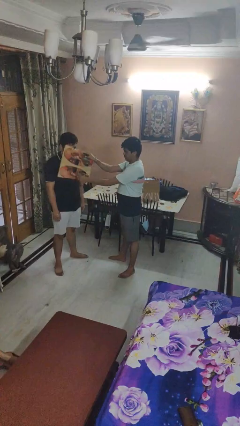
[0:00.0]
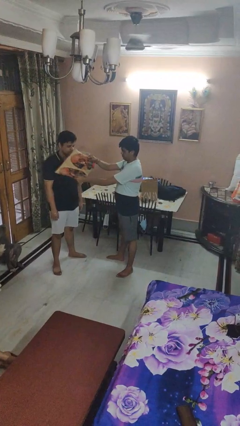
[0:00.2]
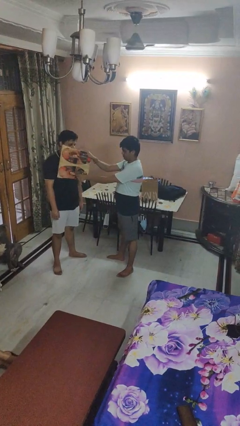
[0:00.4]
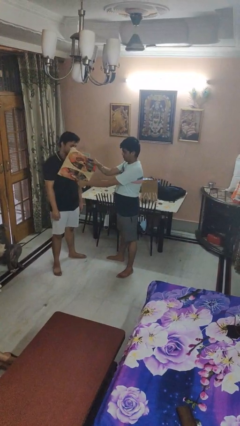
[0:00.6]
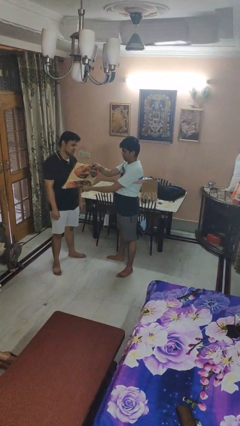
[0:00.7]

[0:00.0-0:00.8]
person hits person with pillow

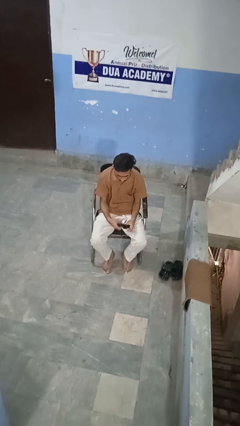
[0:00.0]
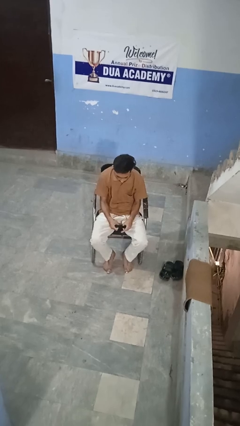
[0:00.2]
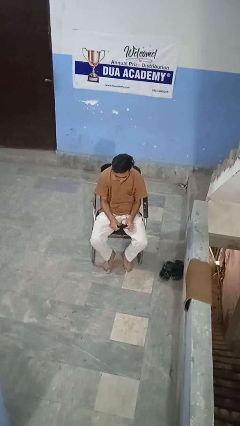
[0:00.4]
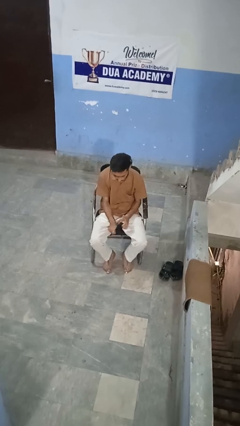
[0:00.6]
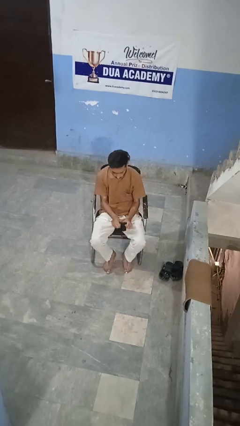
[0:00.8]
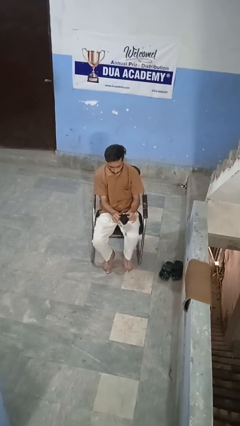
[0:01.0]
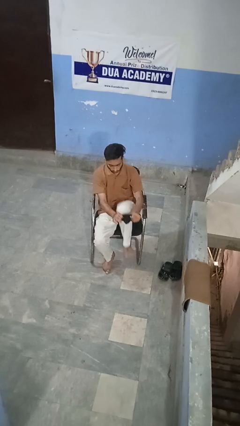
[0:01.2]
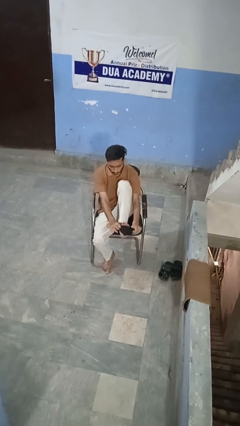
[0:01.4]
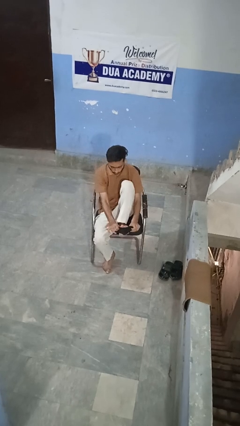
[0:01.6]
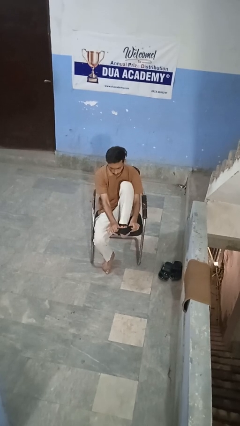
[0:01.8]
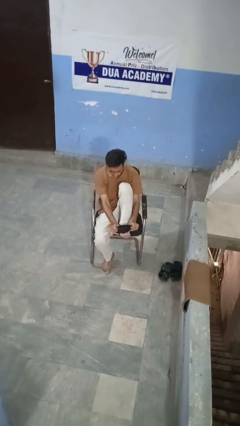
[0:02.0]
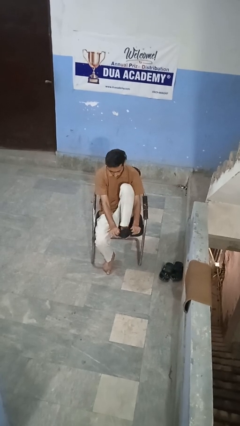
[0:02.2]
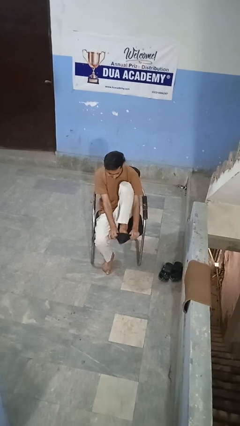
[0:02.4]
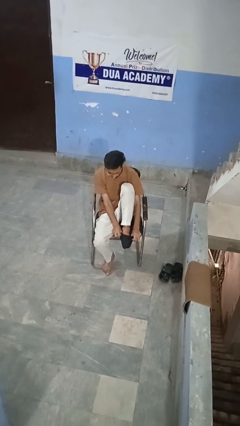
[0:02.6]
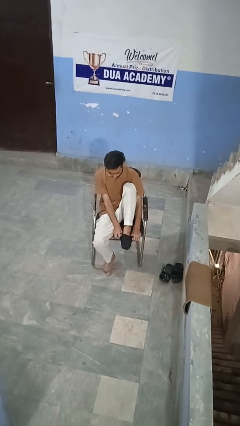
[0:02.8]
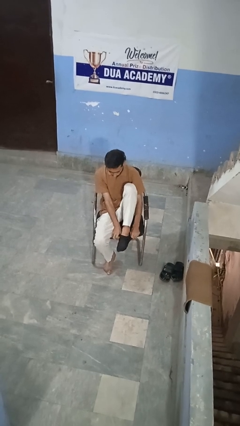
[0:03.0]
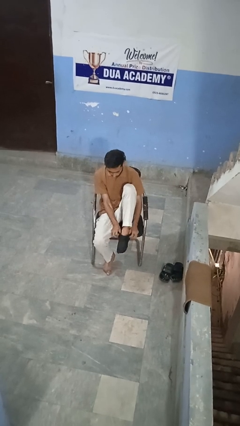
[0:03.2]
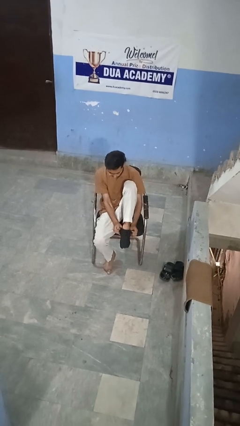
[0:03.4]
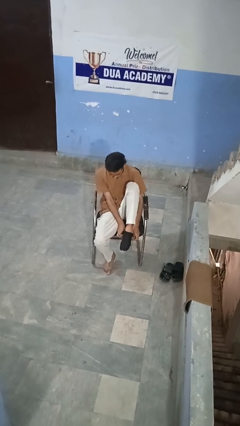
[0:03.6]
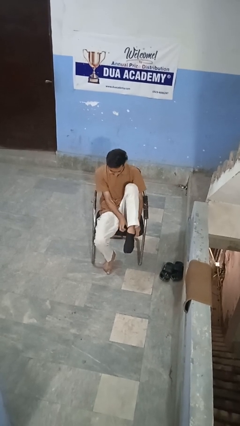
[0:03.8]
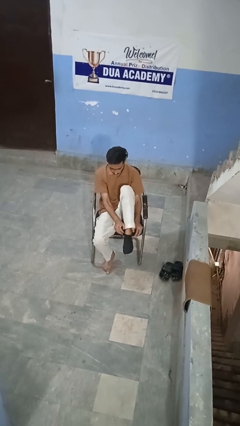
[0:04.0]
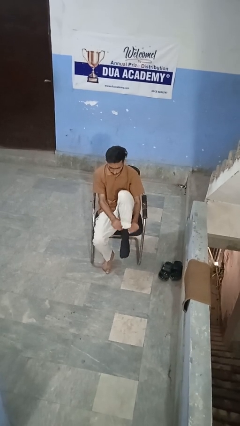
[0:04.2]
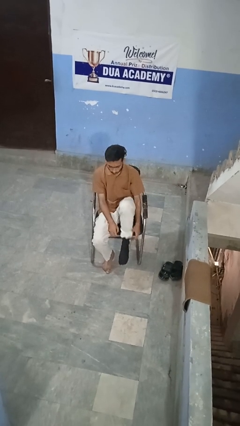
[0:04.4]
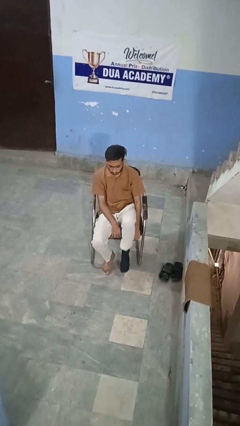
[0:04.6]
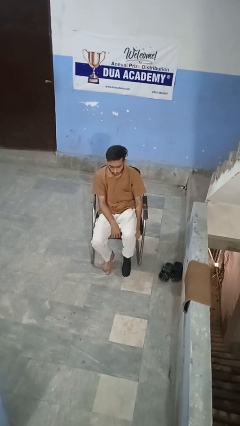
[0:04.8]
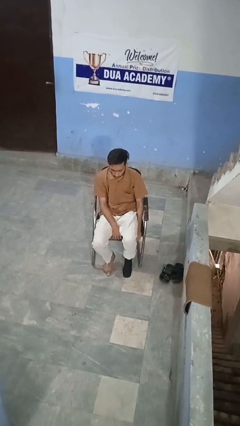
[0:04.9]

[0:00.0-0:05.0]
person puts on socks

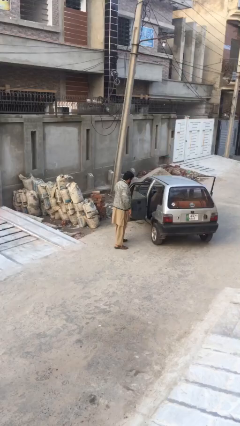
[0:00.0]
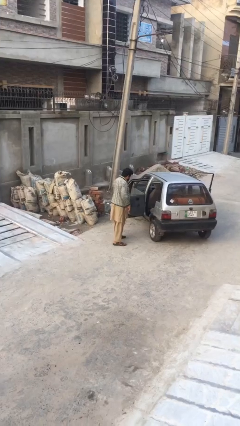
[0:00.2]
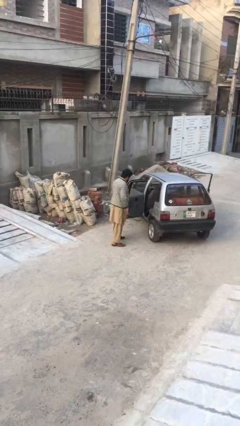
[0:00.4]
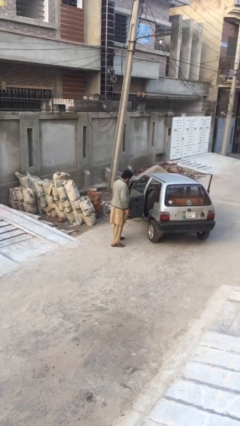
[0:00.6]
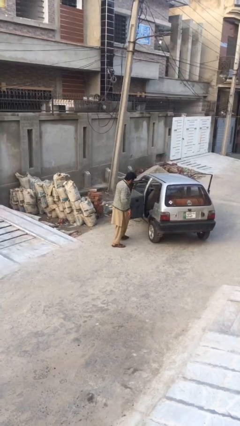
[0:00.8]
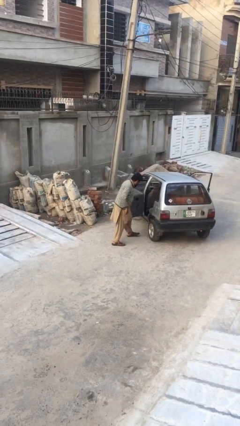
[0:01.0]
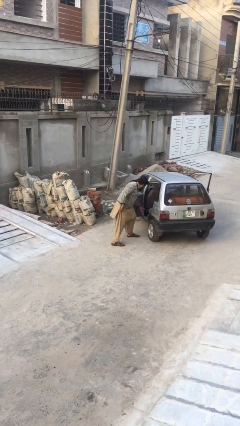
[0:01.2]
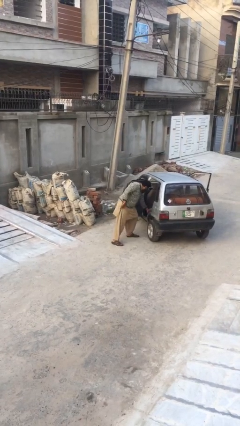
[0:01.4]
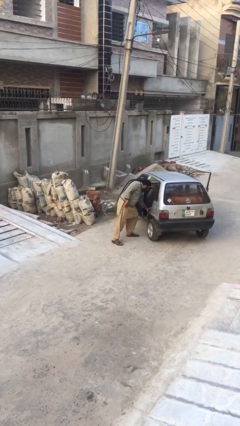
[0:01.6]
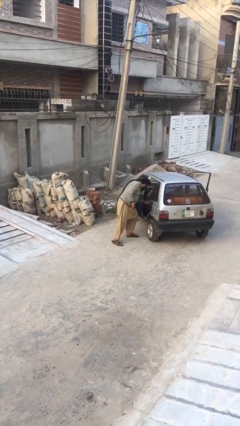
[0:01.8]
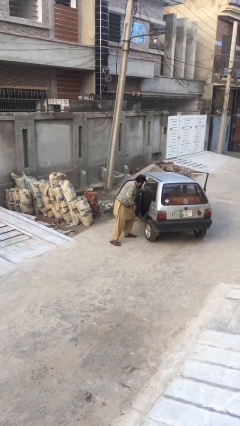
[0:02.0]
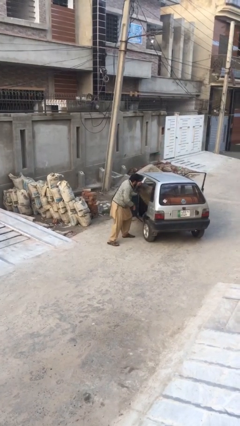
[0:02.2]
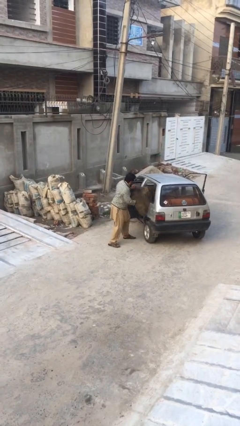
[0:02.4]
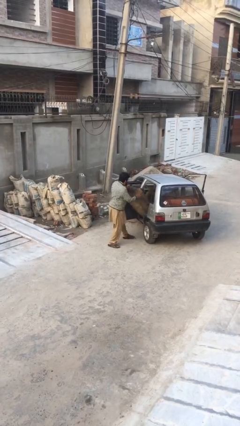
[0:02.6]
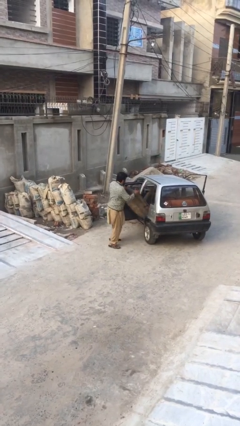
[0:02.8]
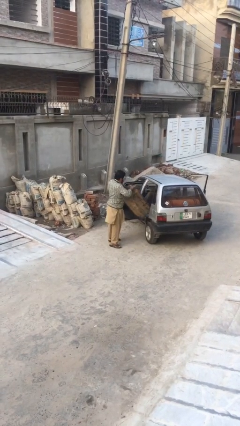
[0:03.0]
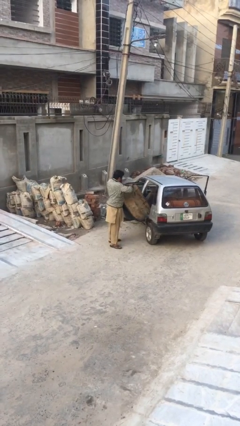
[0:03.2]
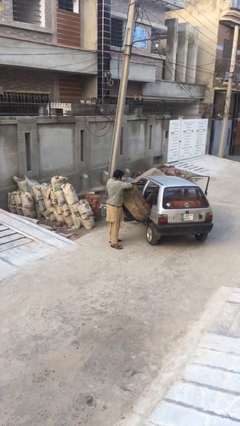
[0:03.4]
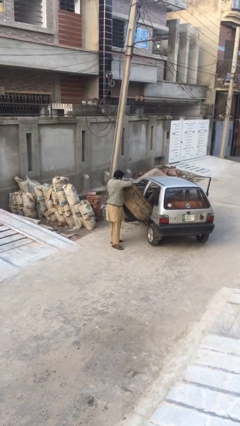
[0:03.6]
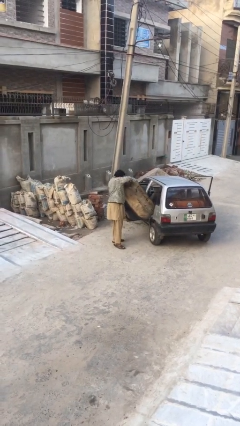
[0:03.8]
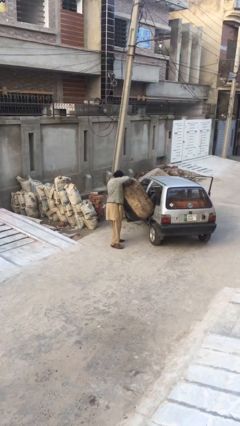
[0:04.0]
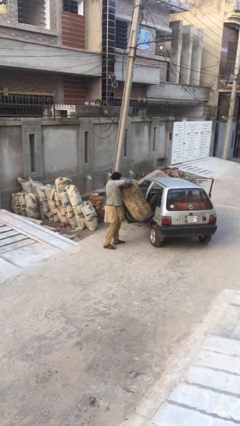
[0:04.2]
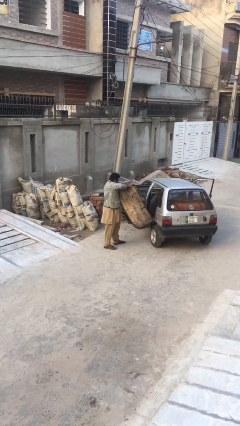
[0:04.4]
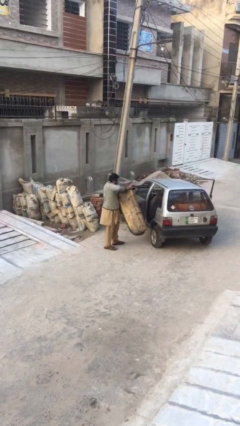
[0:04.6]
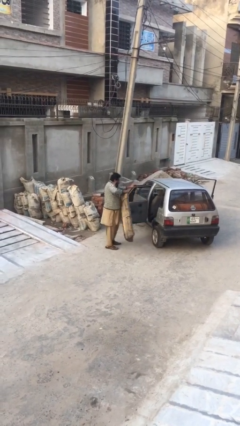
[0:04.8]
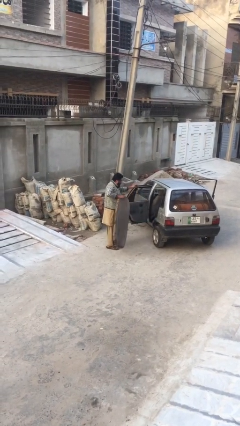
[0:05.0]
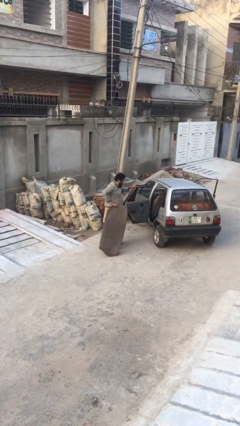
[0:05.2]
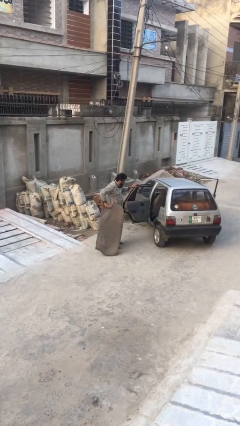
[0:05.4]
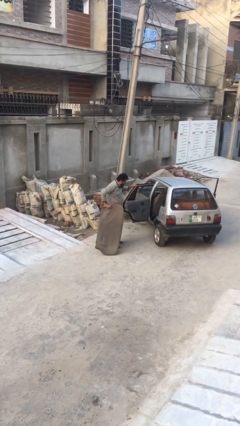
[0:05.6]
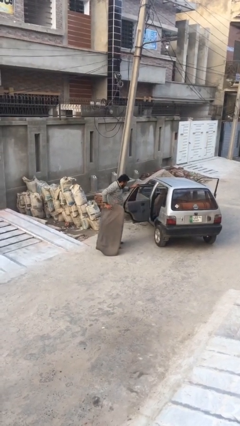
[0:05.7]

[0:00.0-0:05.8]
person unloads car

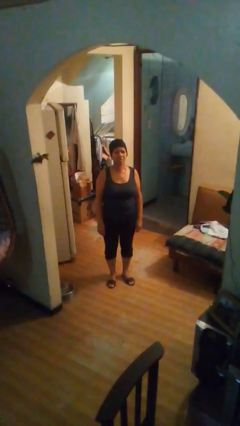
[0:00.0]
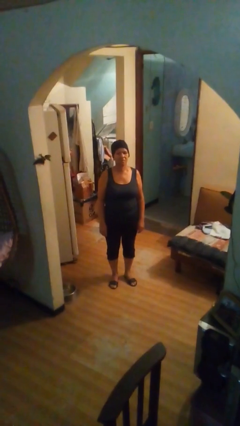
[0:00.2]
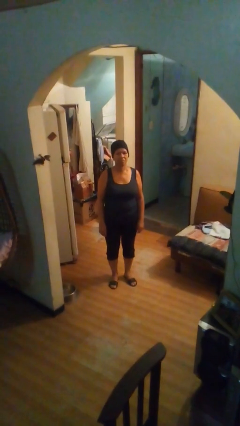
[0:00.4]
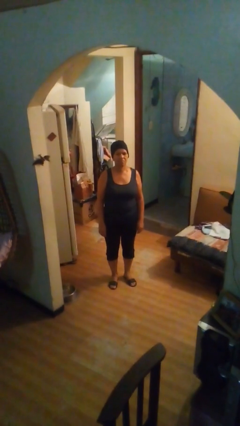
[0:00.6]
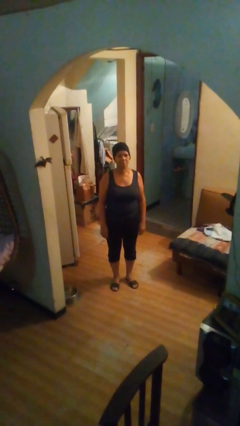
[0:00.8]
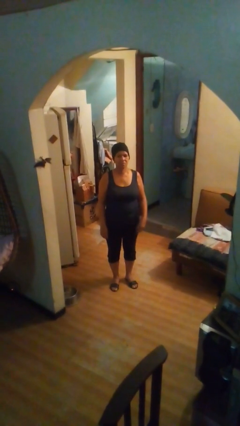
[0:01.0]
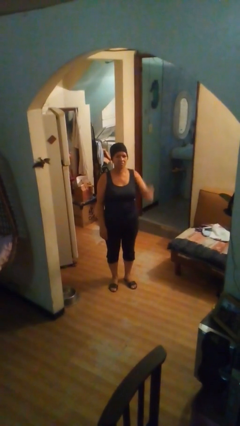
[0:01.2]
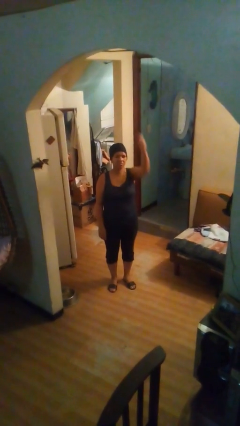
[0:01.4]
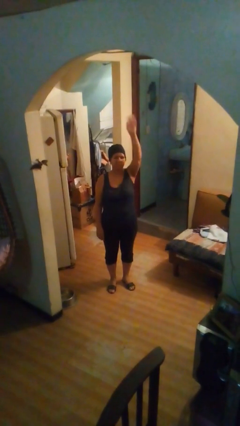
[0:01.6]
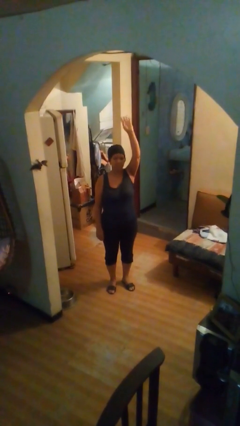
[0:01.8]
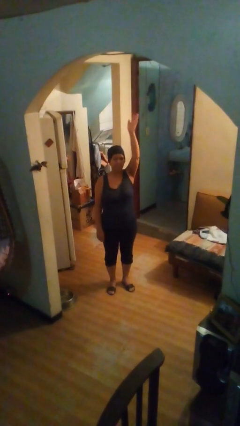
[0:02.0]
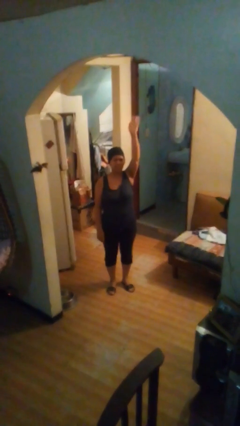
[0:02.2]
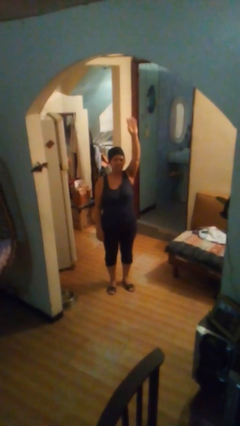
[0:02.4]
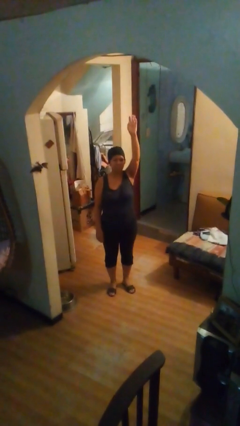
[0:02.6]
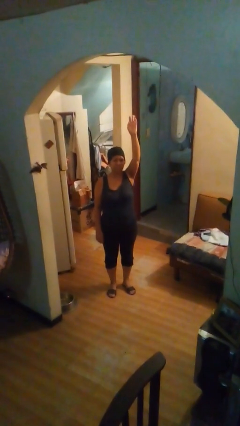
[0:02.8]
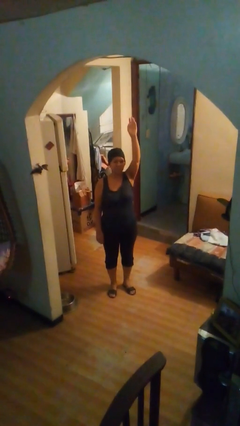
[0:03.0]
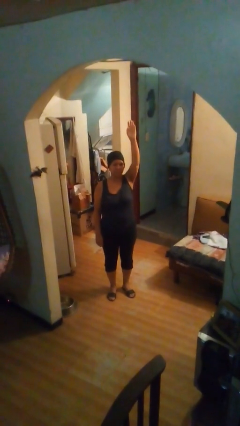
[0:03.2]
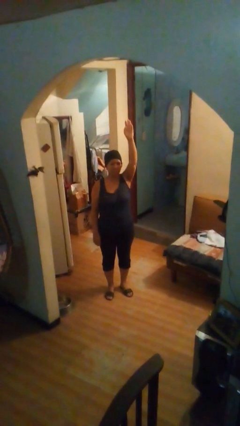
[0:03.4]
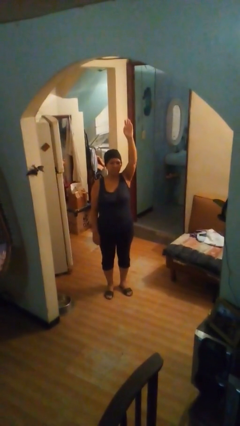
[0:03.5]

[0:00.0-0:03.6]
person gestures raise hand

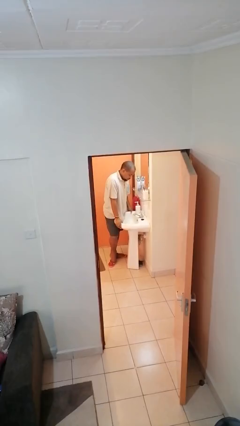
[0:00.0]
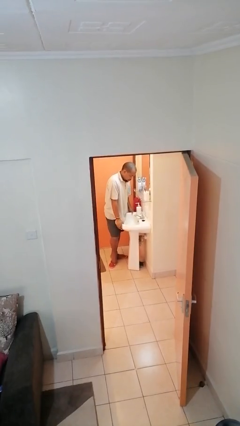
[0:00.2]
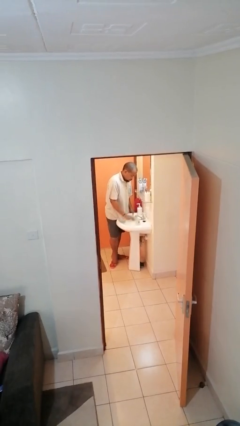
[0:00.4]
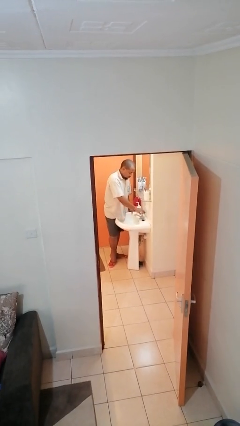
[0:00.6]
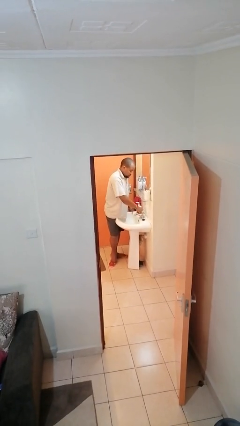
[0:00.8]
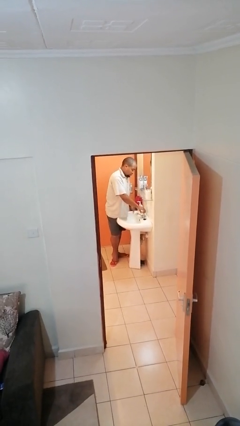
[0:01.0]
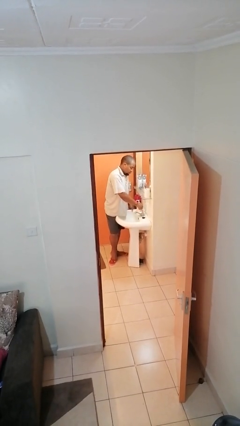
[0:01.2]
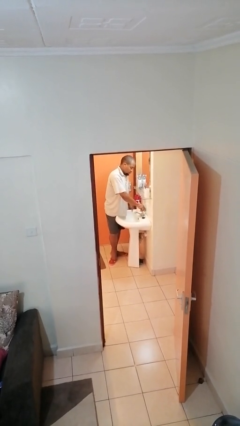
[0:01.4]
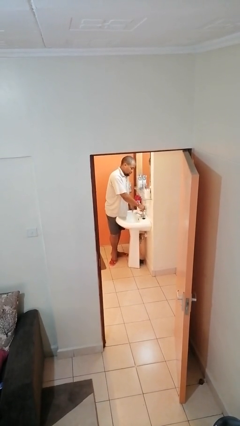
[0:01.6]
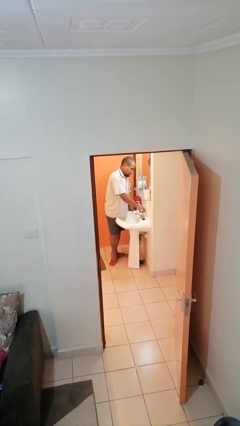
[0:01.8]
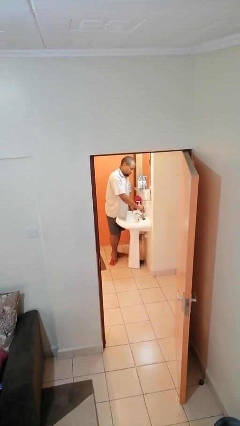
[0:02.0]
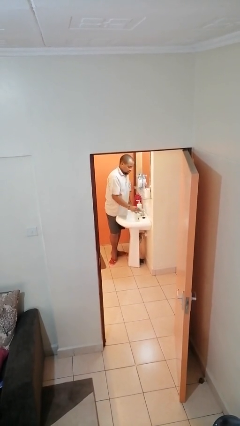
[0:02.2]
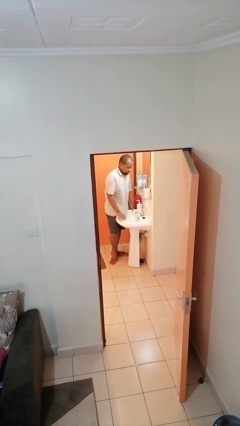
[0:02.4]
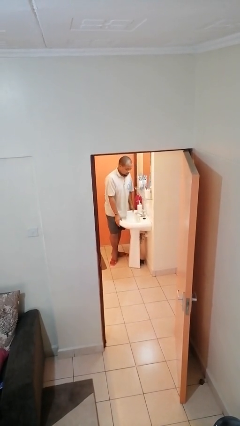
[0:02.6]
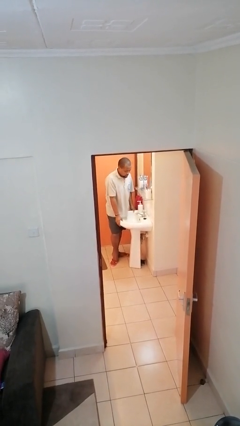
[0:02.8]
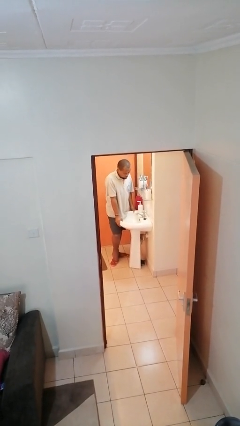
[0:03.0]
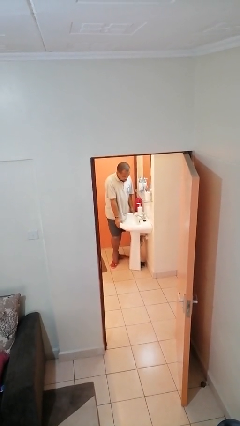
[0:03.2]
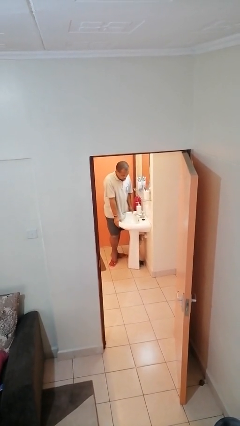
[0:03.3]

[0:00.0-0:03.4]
person turns off faucet
